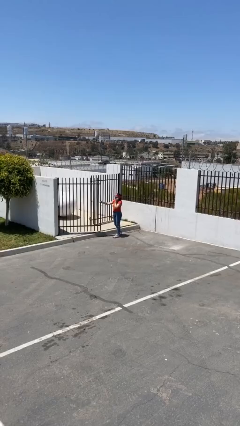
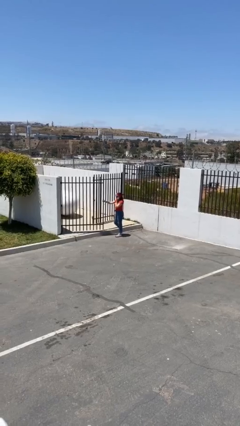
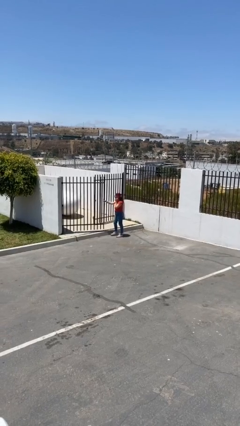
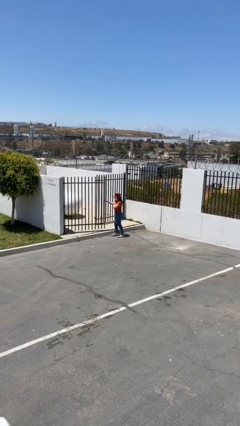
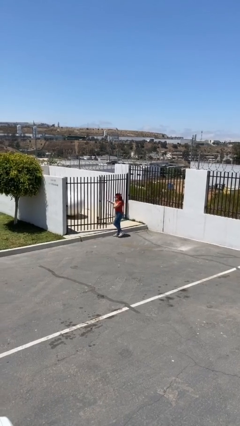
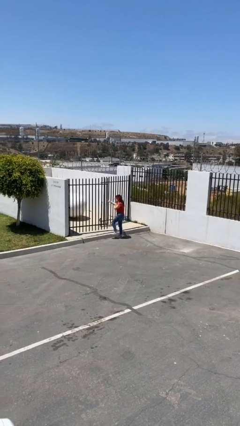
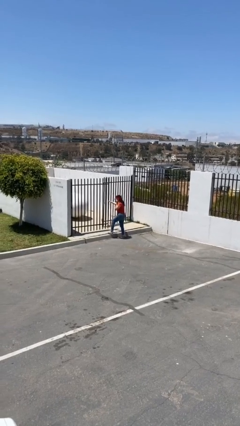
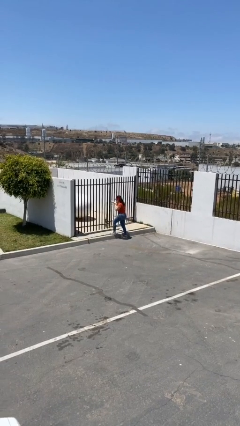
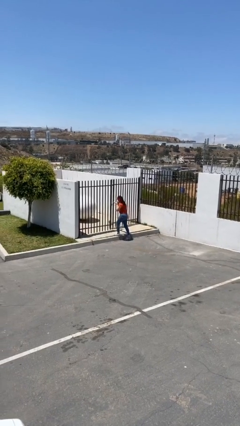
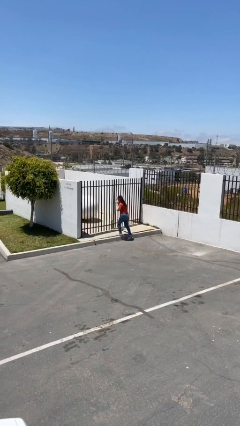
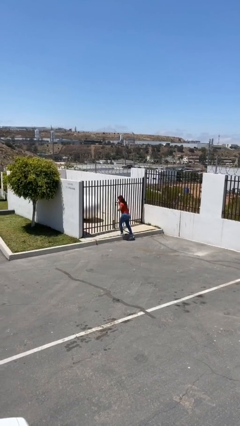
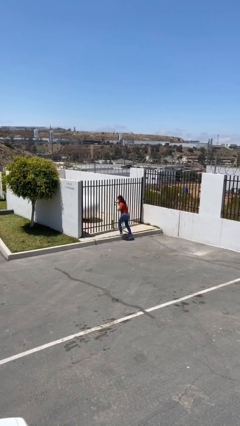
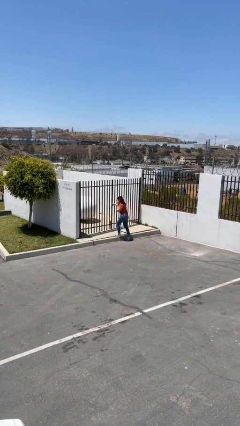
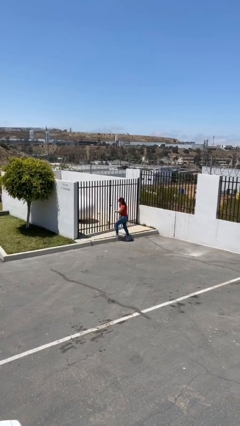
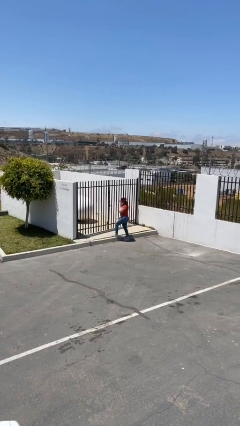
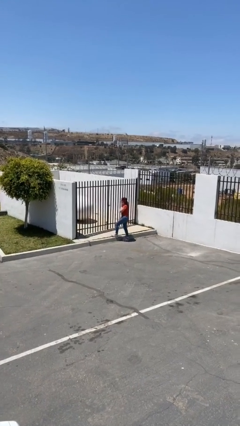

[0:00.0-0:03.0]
person closes facility door

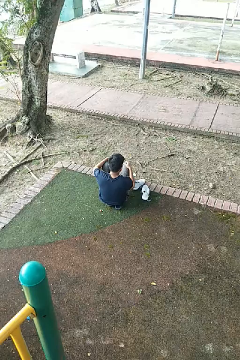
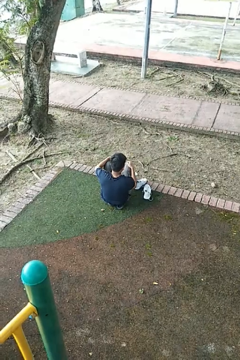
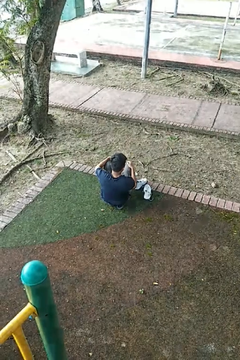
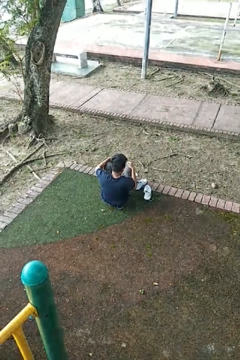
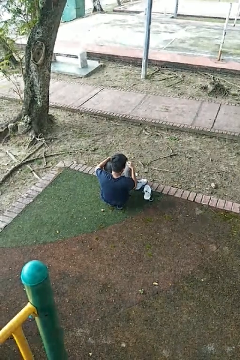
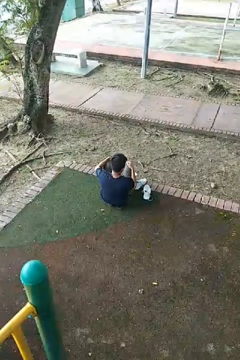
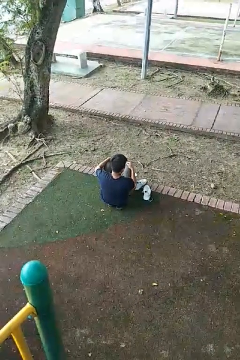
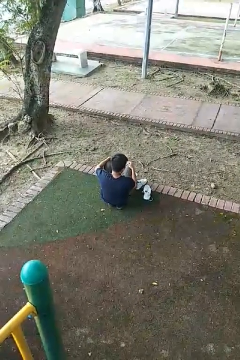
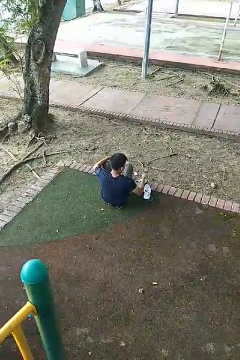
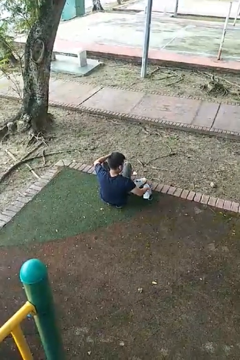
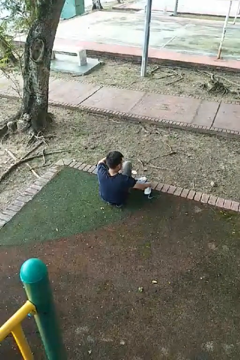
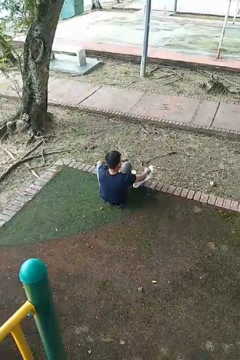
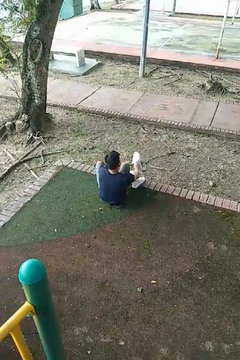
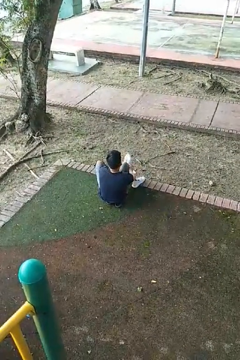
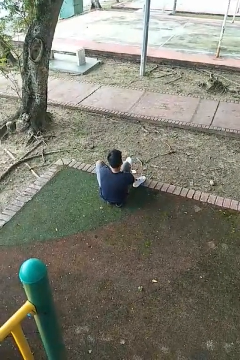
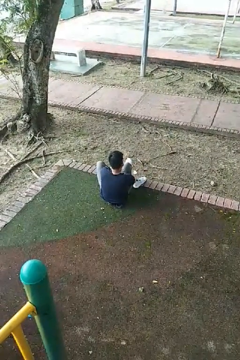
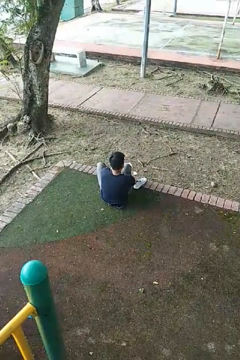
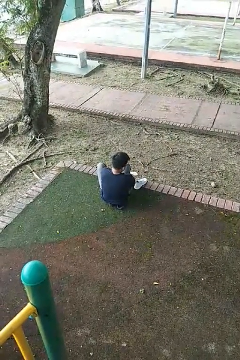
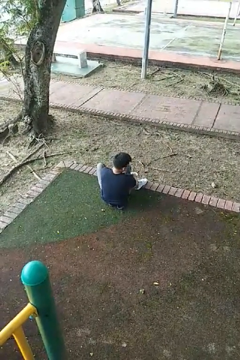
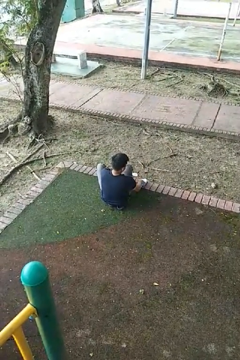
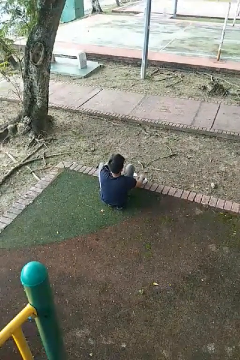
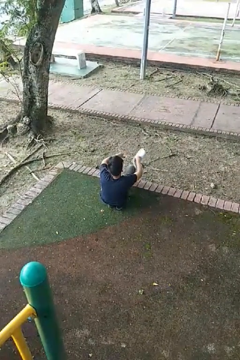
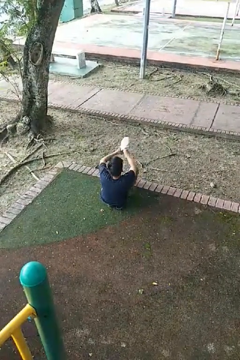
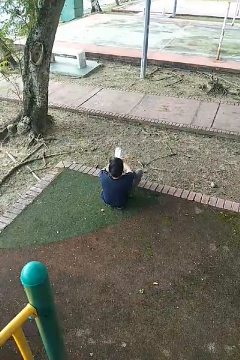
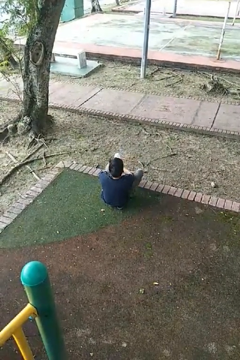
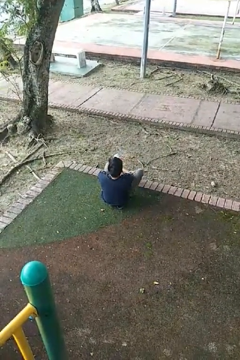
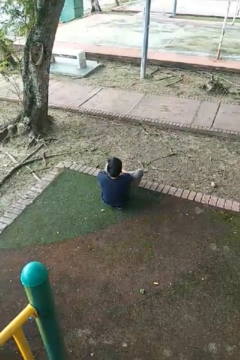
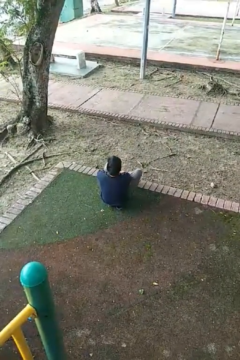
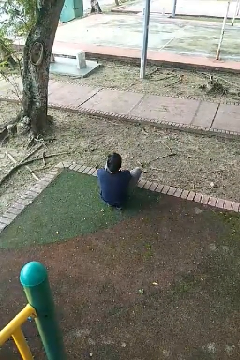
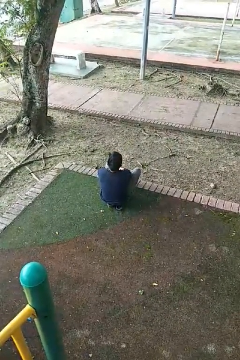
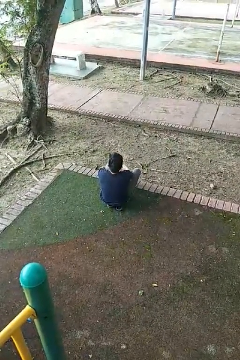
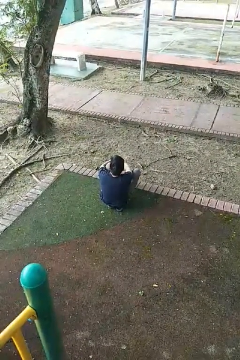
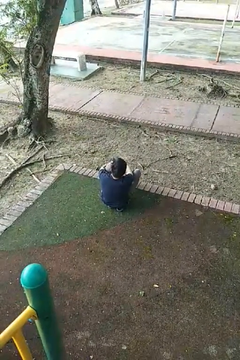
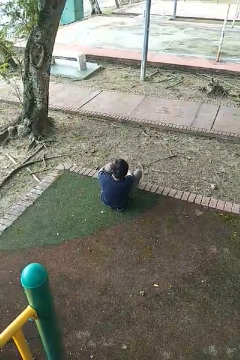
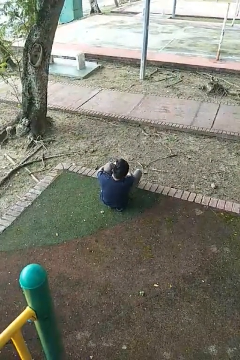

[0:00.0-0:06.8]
person puts on shoes

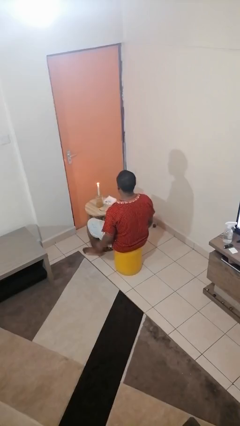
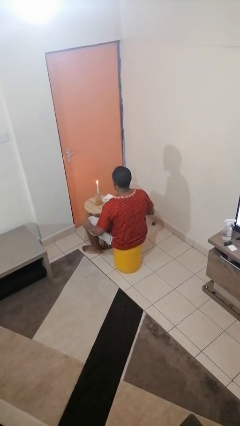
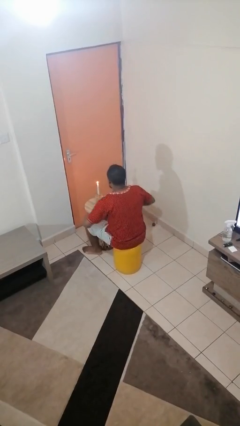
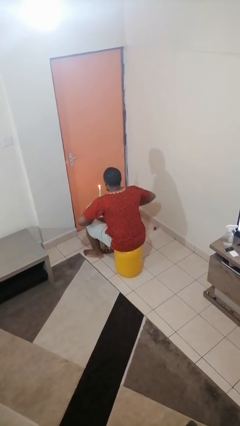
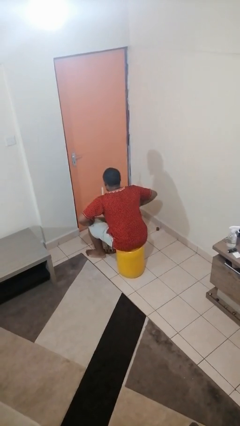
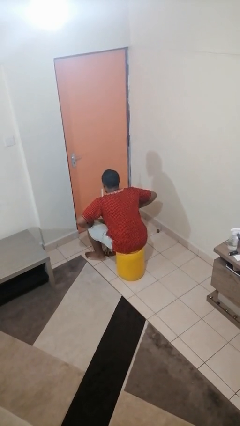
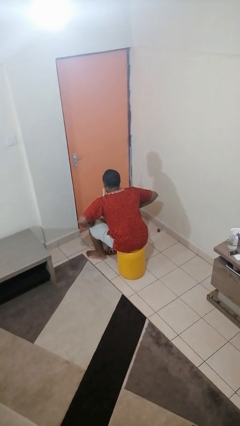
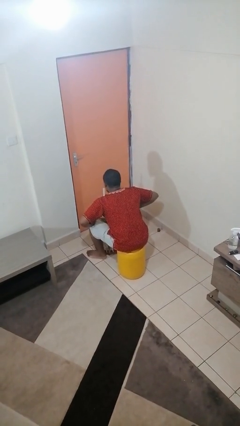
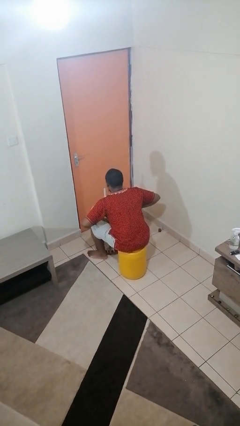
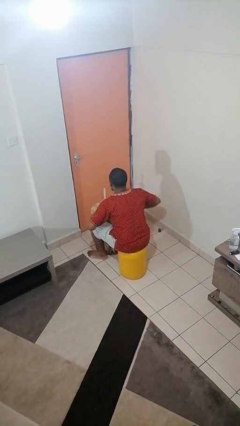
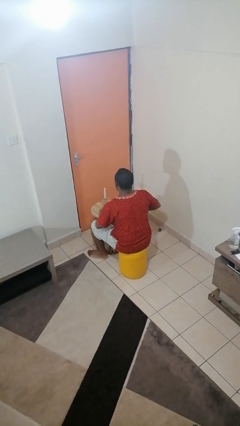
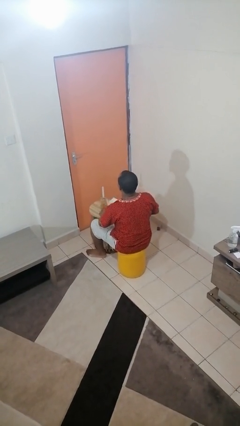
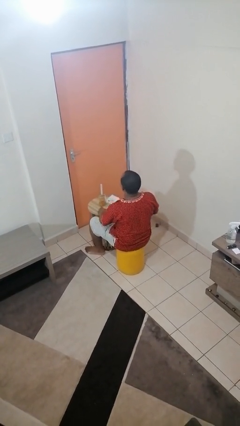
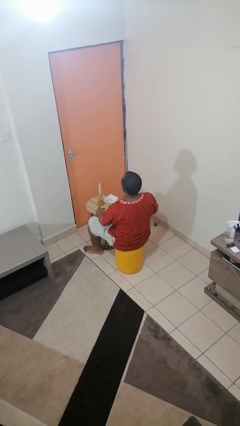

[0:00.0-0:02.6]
person extinguishes candle

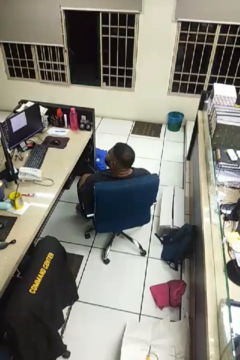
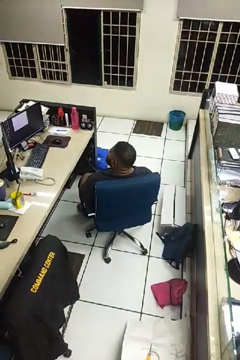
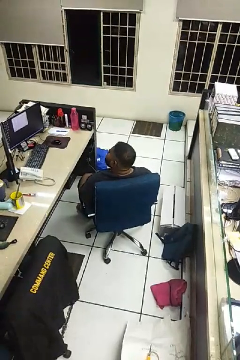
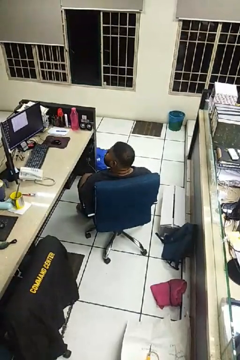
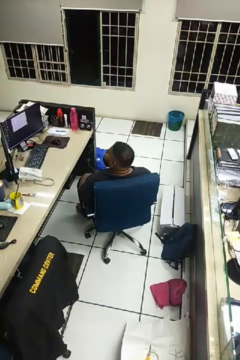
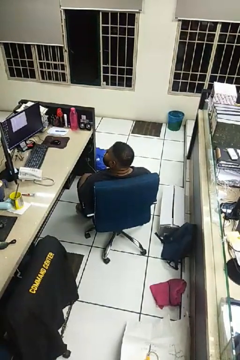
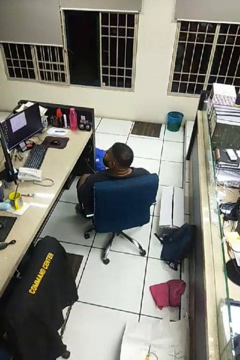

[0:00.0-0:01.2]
person sticks out tongue

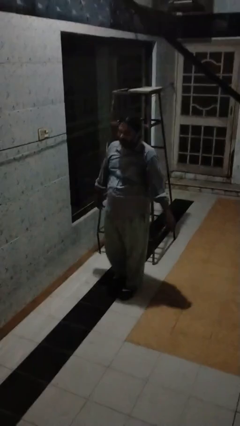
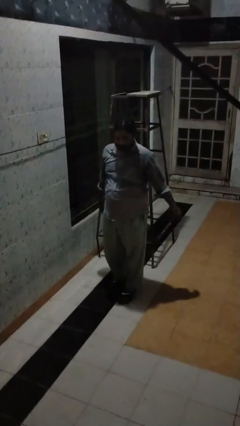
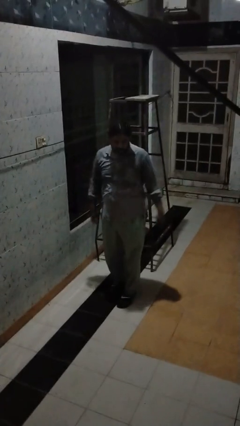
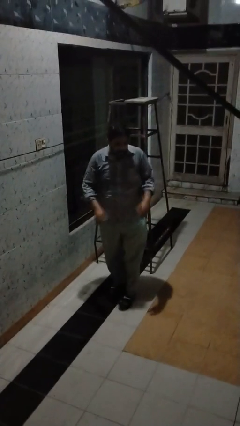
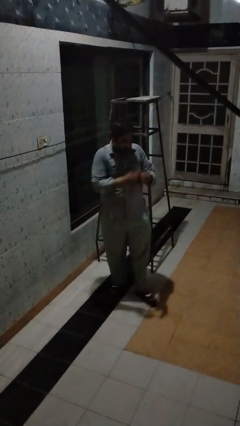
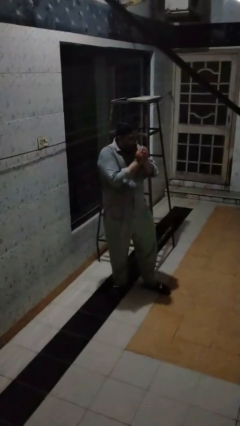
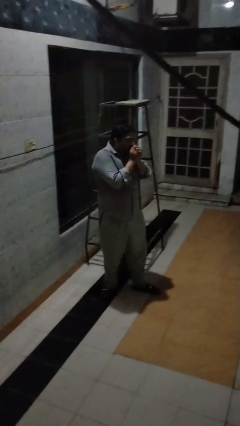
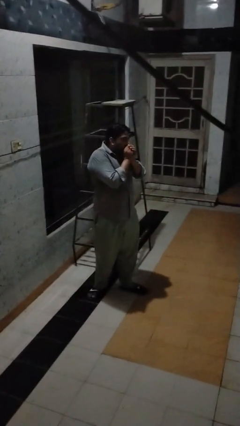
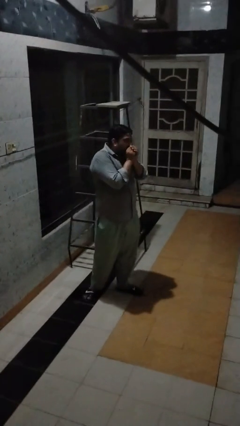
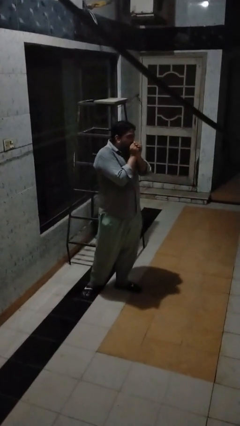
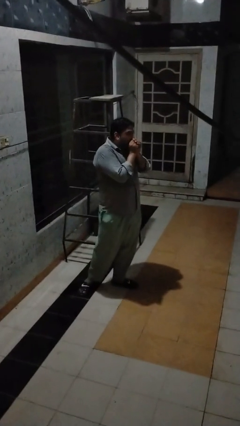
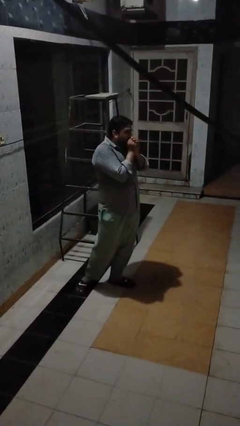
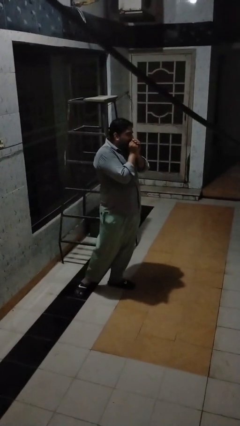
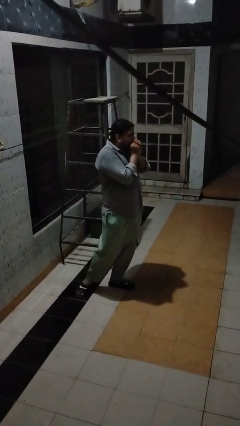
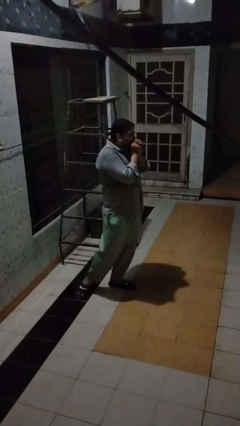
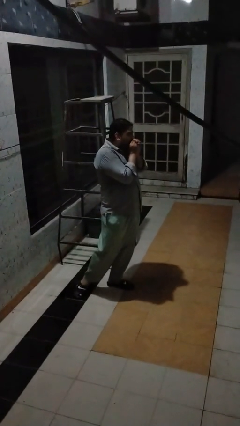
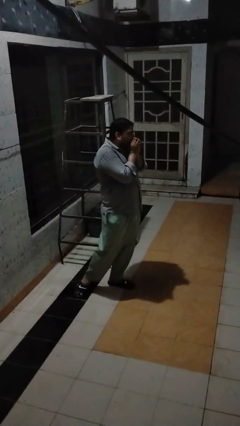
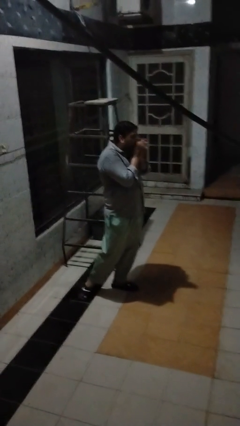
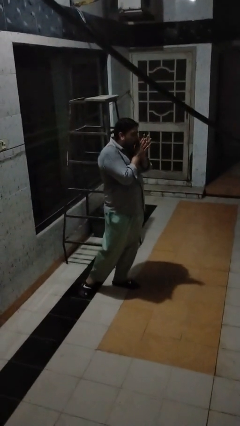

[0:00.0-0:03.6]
person blows into hands

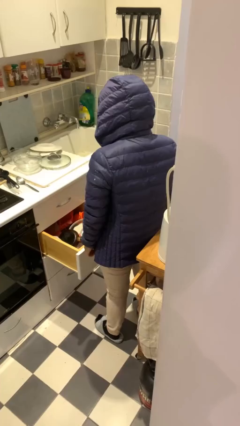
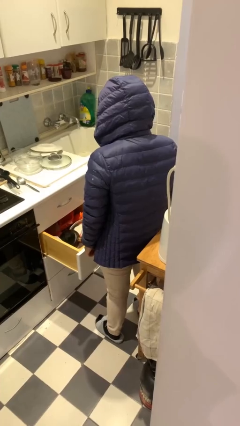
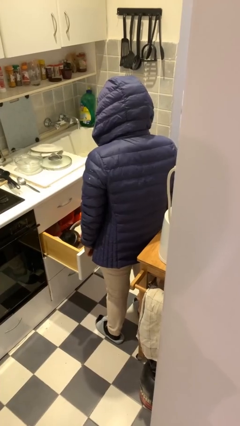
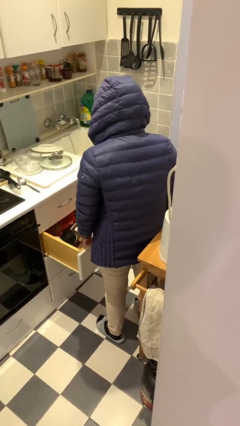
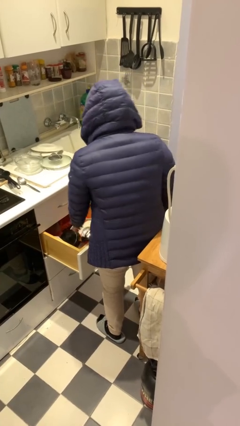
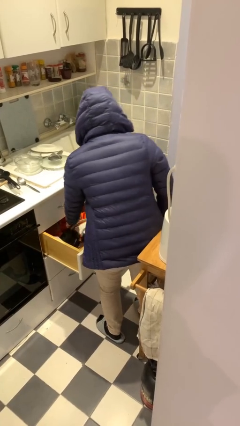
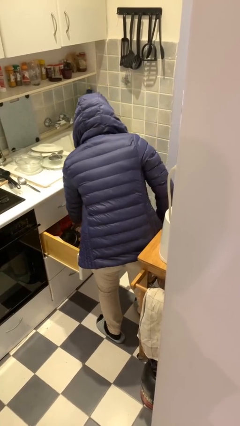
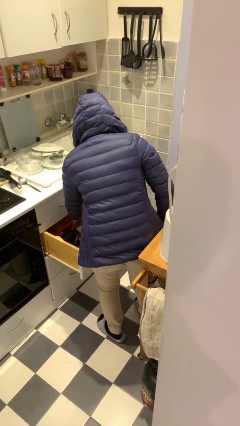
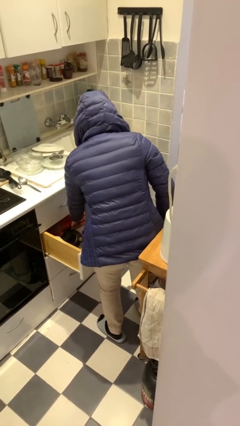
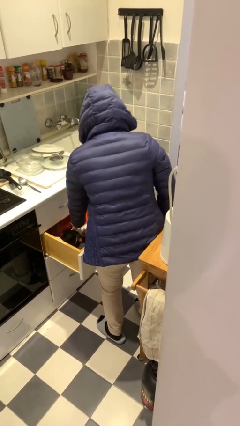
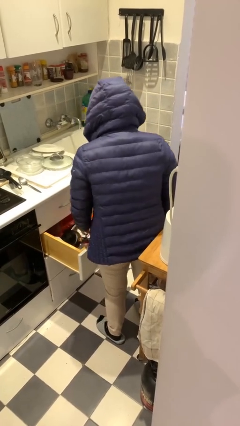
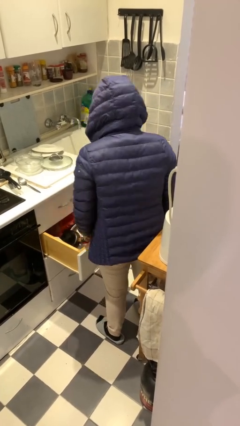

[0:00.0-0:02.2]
person searches in kitchen drawer
